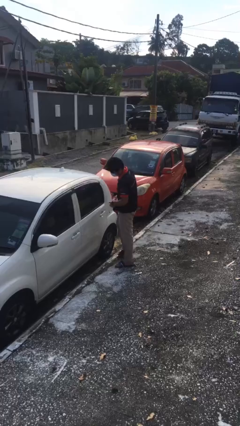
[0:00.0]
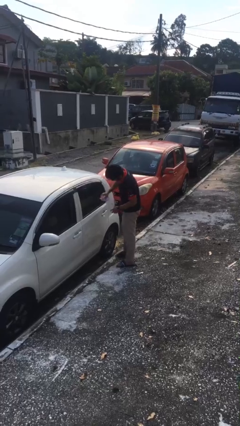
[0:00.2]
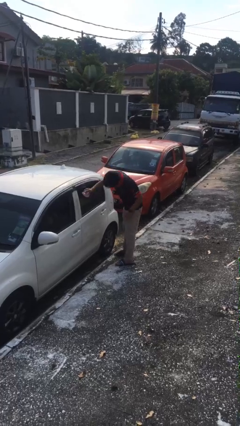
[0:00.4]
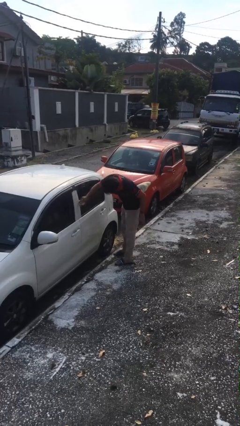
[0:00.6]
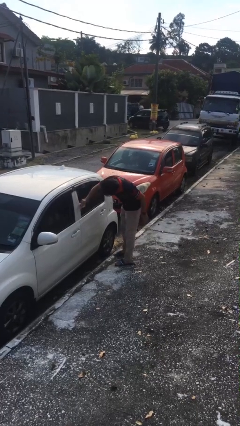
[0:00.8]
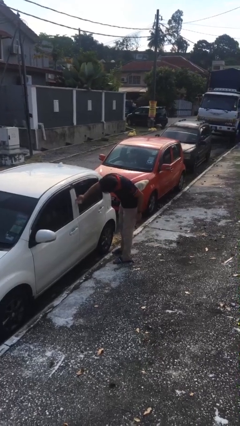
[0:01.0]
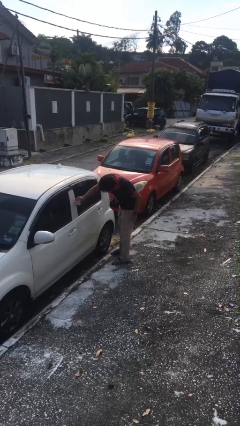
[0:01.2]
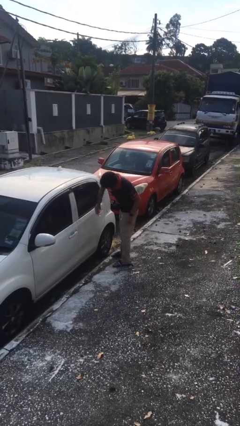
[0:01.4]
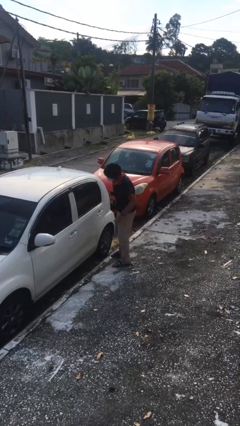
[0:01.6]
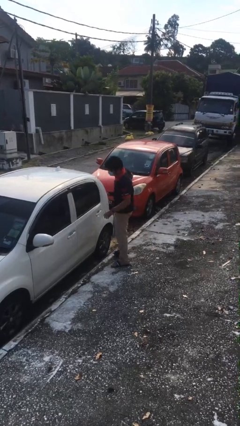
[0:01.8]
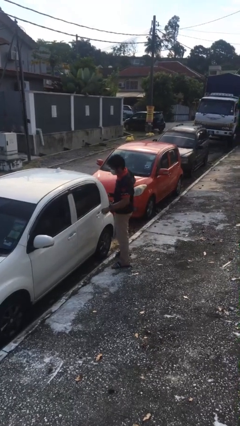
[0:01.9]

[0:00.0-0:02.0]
person polishes car with rag

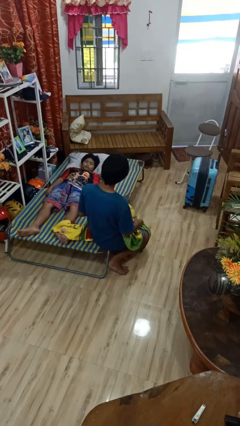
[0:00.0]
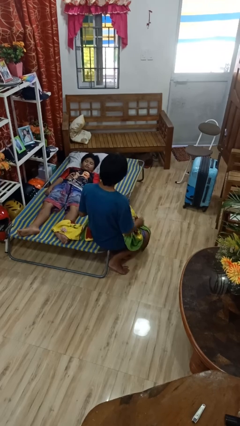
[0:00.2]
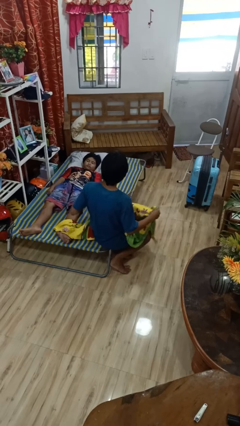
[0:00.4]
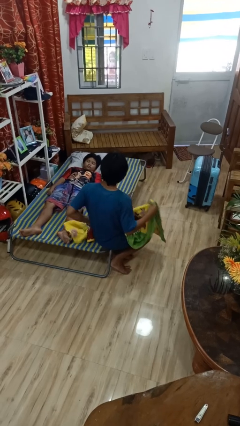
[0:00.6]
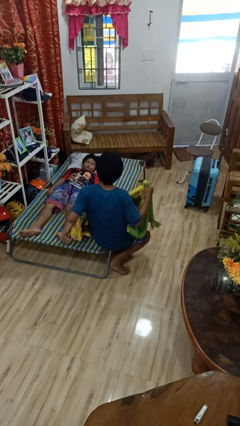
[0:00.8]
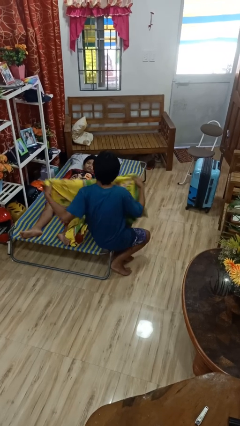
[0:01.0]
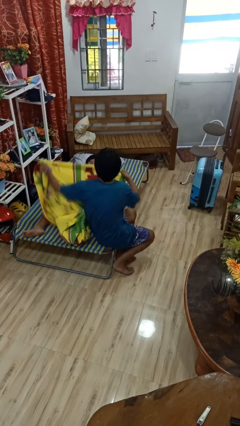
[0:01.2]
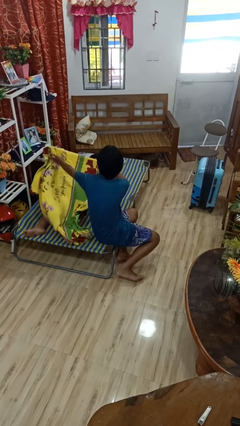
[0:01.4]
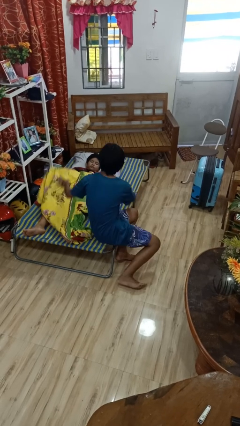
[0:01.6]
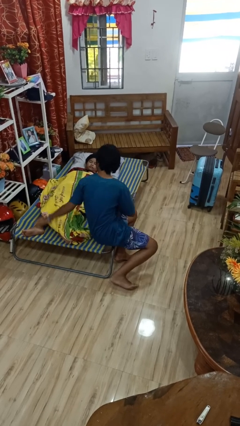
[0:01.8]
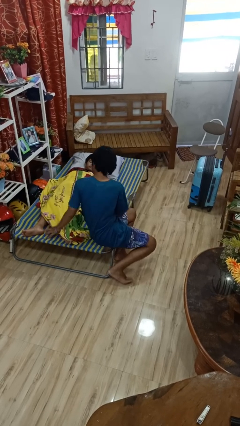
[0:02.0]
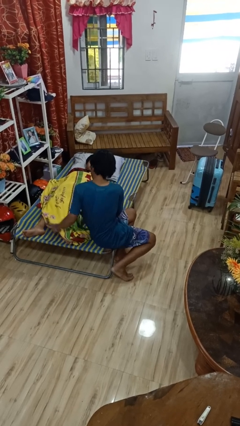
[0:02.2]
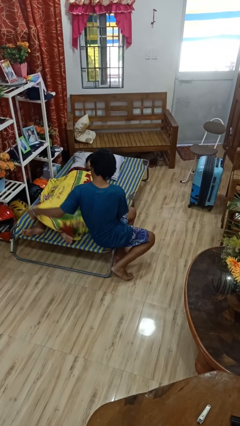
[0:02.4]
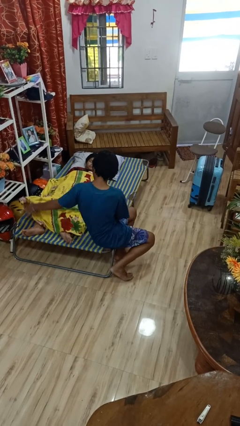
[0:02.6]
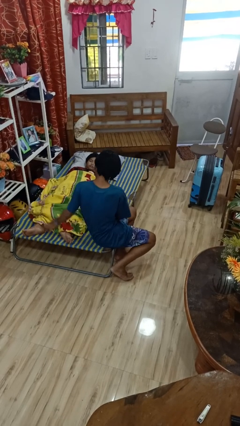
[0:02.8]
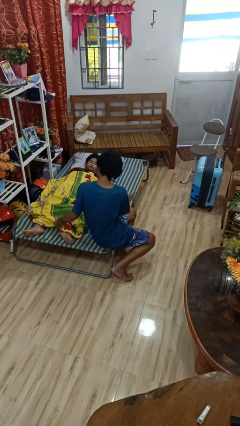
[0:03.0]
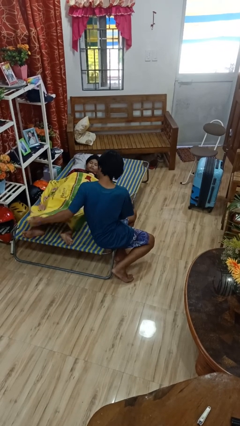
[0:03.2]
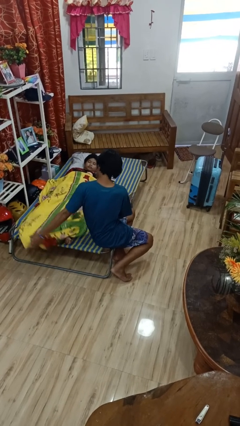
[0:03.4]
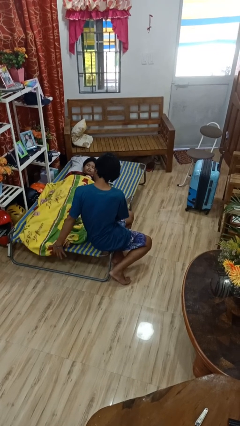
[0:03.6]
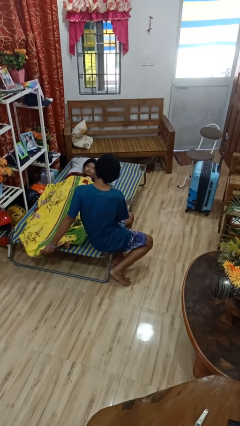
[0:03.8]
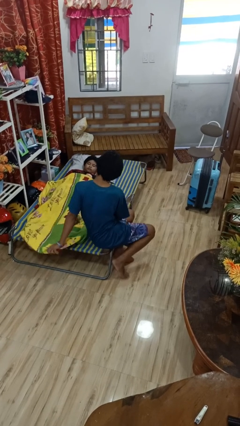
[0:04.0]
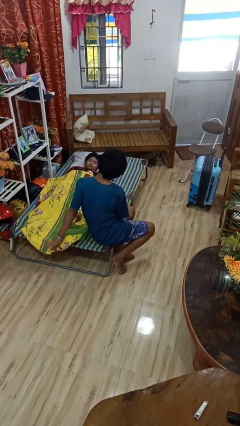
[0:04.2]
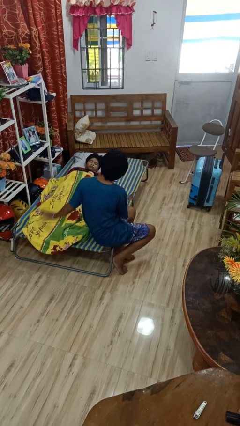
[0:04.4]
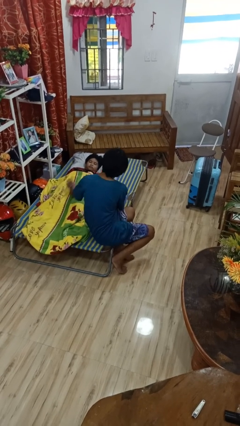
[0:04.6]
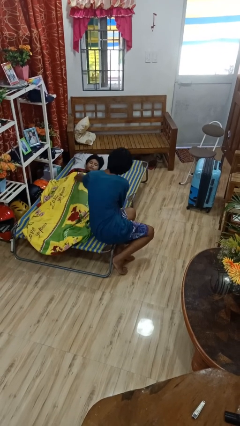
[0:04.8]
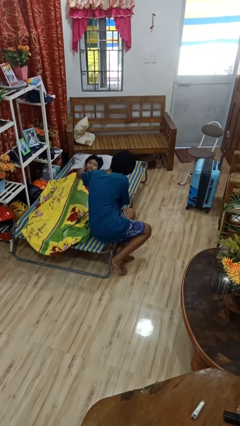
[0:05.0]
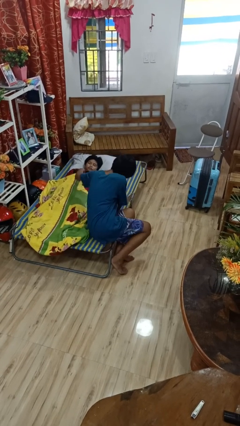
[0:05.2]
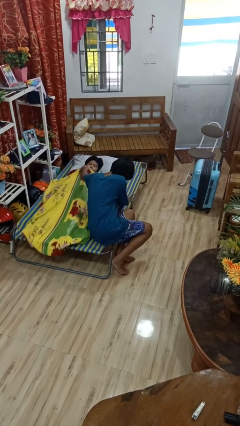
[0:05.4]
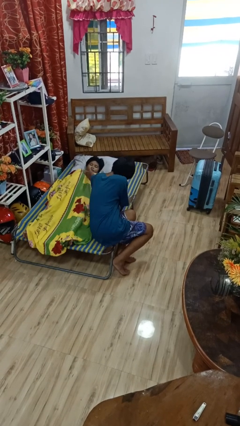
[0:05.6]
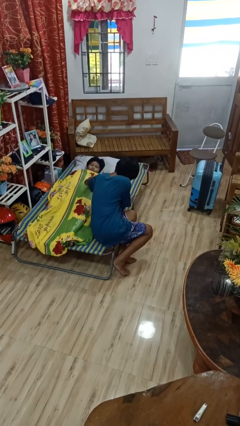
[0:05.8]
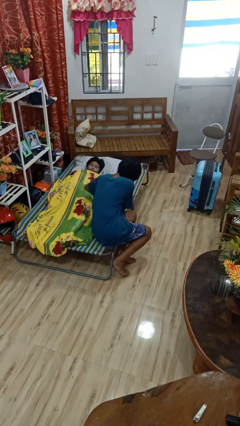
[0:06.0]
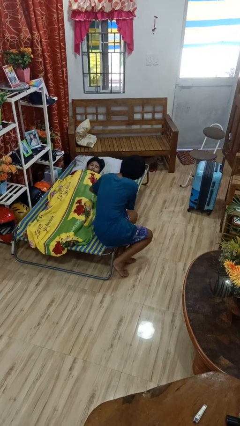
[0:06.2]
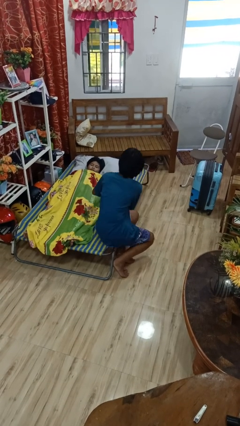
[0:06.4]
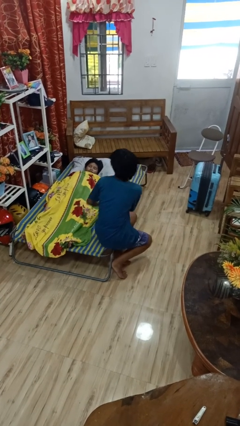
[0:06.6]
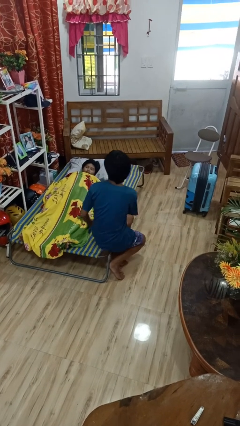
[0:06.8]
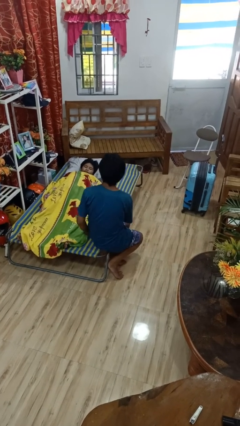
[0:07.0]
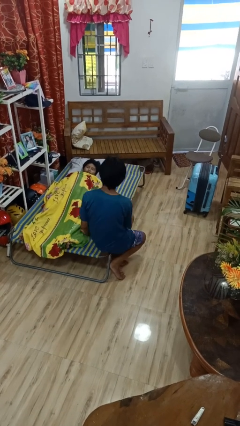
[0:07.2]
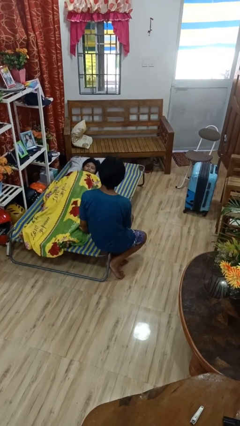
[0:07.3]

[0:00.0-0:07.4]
person covers friend with blanket

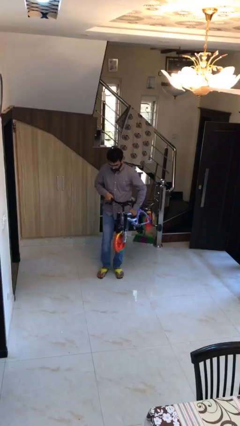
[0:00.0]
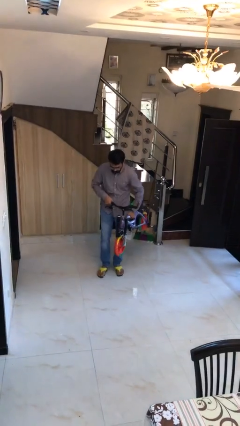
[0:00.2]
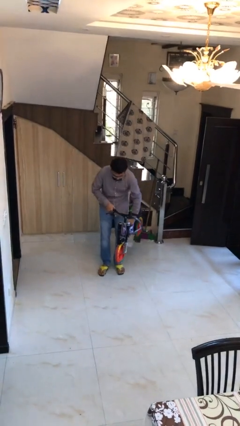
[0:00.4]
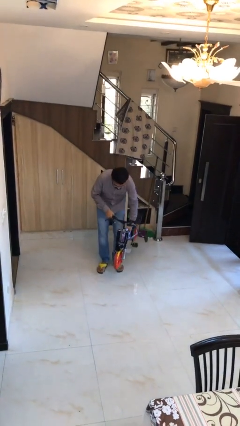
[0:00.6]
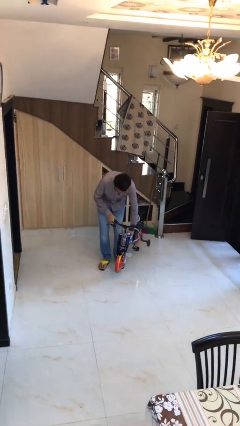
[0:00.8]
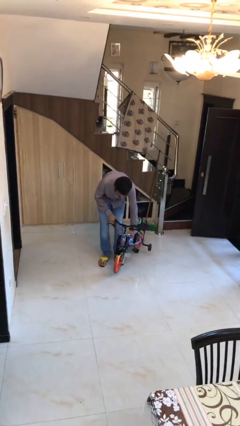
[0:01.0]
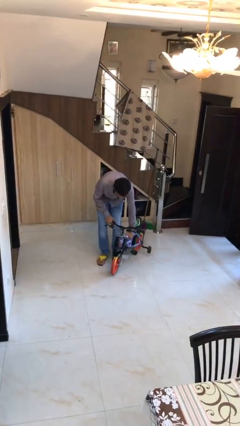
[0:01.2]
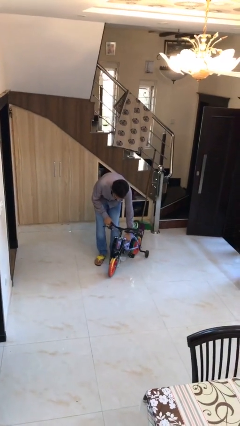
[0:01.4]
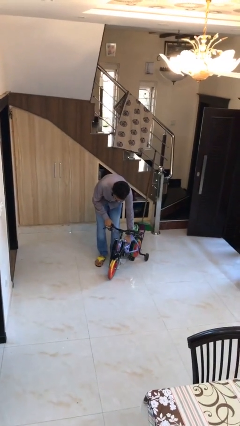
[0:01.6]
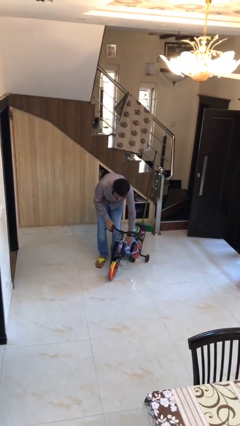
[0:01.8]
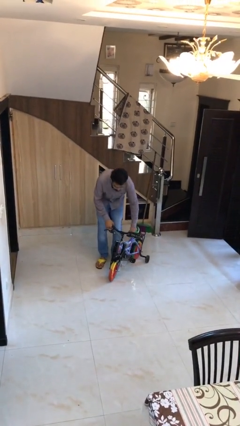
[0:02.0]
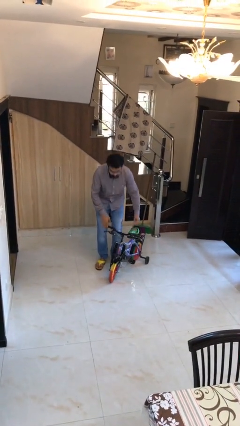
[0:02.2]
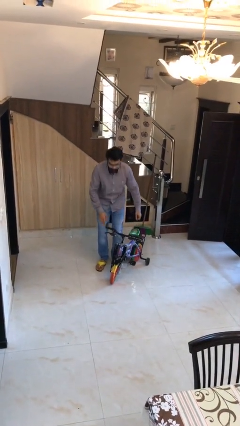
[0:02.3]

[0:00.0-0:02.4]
person puts down object on floor

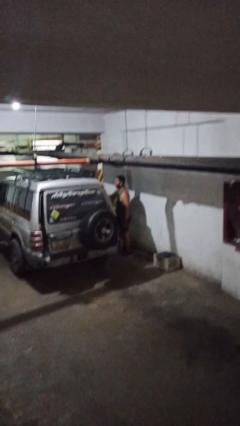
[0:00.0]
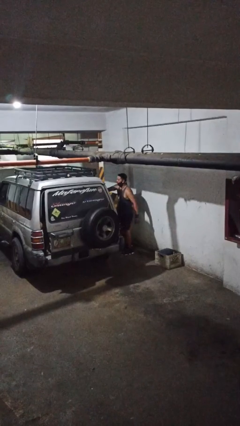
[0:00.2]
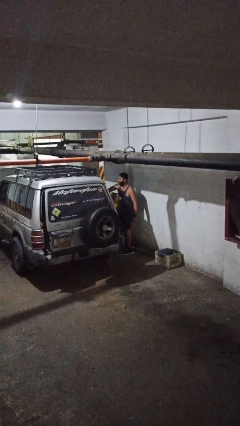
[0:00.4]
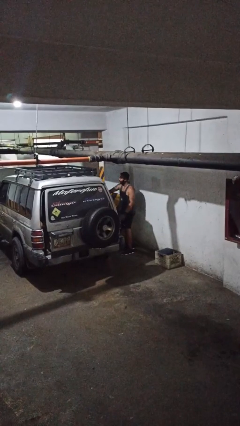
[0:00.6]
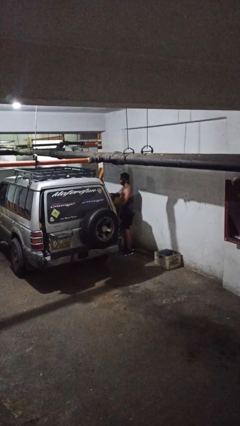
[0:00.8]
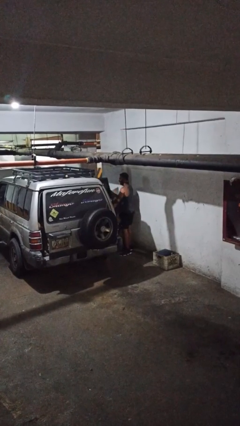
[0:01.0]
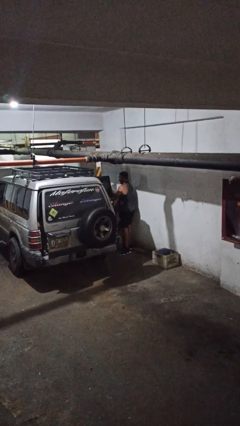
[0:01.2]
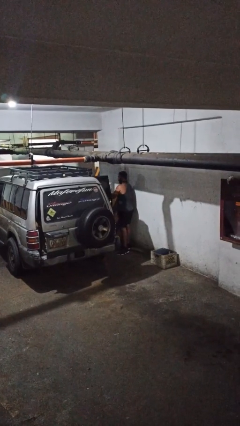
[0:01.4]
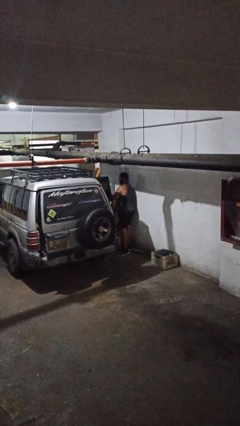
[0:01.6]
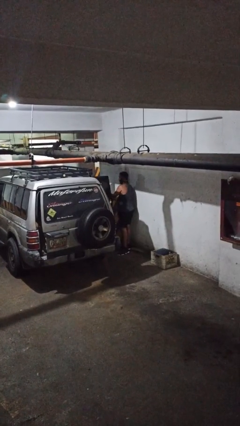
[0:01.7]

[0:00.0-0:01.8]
person opens car door

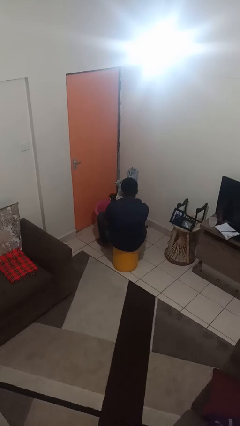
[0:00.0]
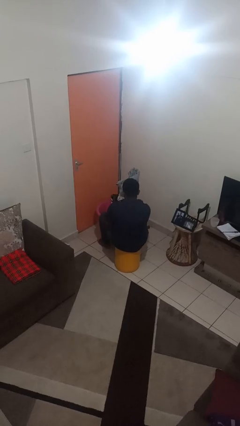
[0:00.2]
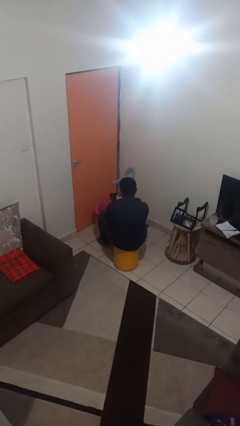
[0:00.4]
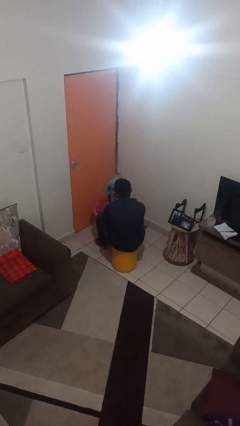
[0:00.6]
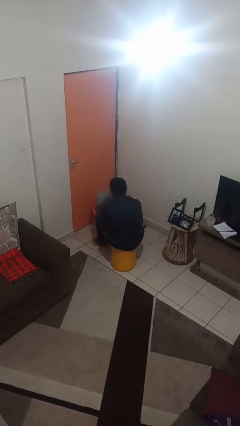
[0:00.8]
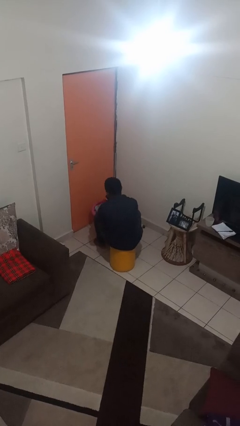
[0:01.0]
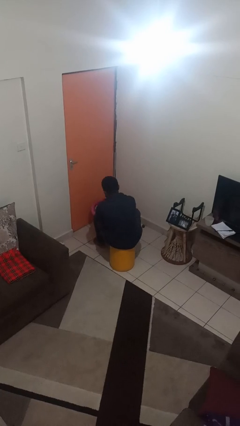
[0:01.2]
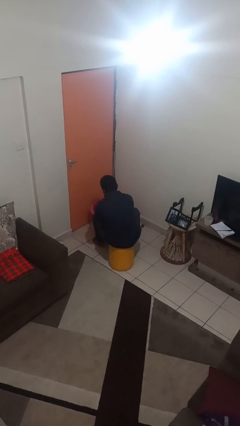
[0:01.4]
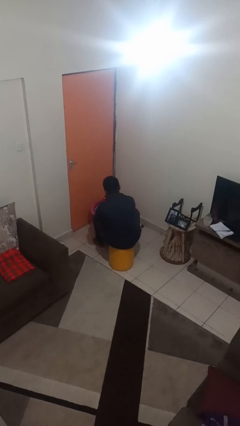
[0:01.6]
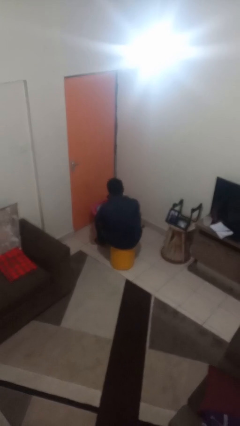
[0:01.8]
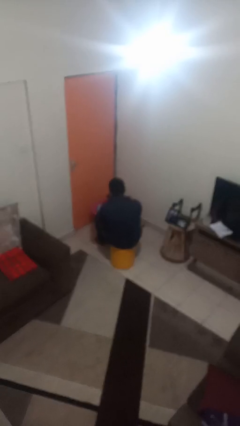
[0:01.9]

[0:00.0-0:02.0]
person puts object into basket

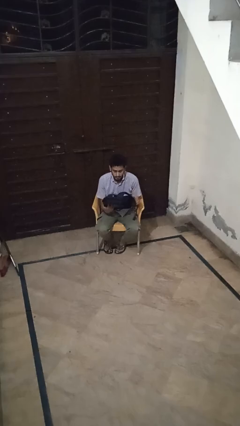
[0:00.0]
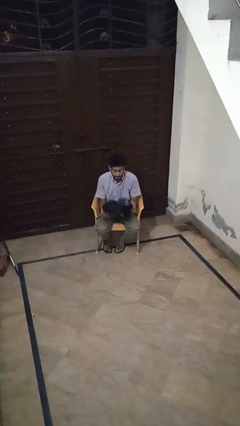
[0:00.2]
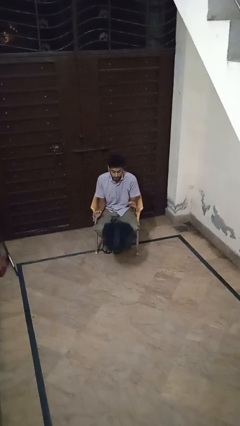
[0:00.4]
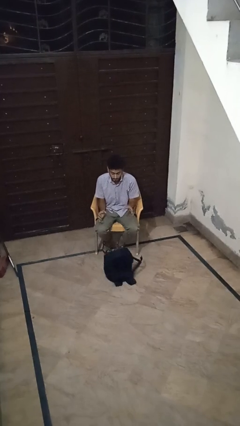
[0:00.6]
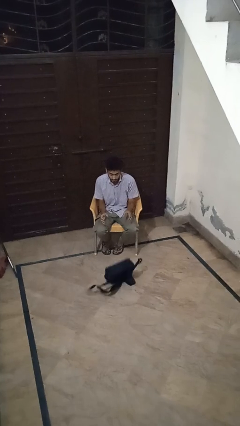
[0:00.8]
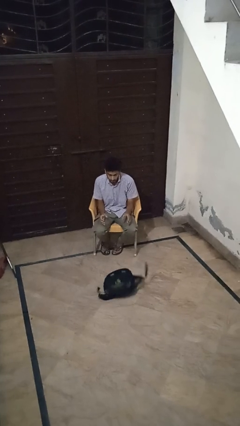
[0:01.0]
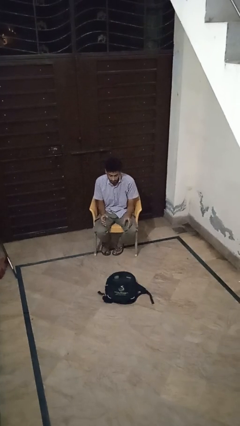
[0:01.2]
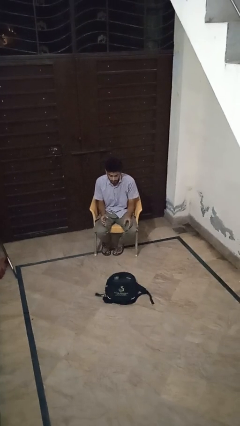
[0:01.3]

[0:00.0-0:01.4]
person drops object

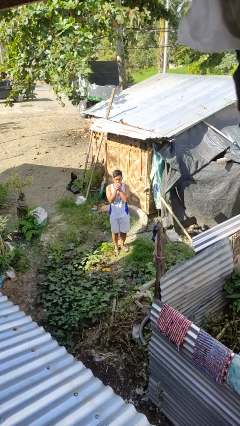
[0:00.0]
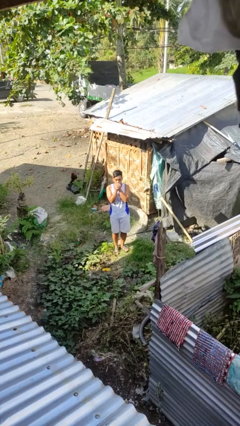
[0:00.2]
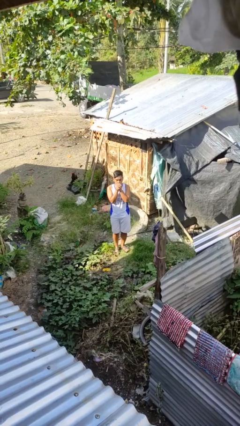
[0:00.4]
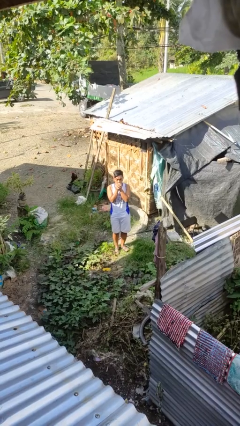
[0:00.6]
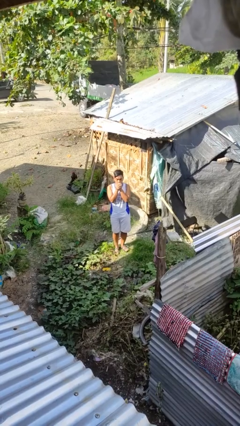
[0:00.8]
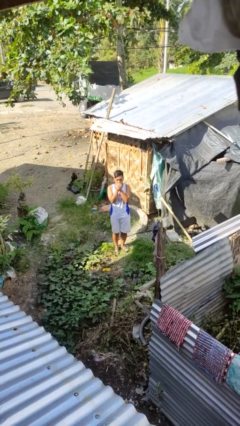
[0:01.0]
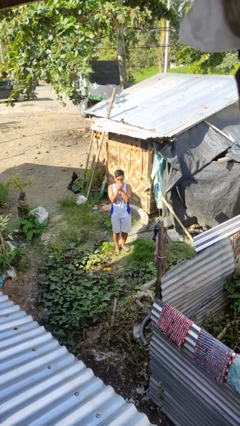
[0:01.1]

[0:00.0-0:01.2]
person blows into hands
